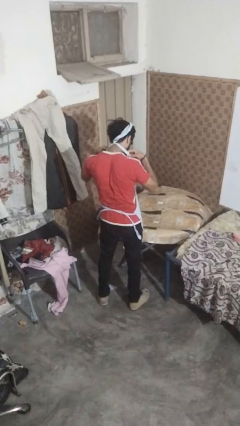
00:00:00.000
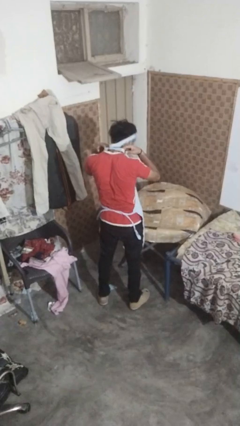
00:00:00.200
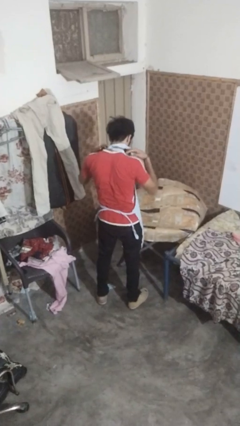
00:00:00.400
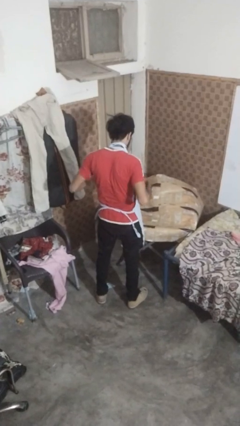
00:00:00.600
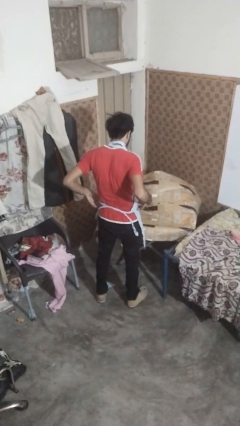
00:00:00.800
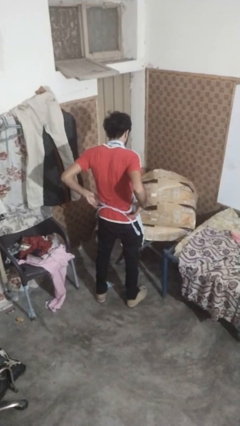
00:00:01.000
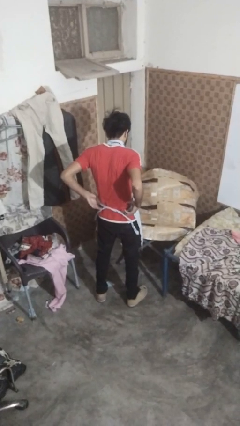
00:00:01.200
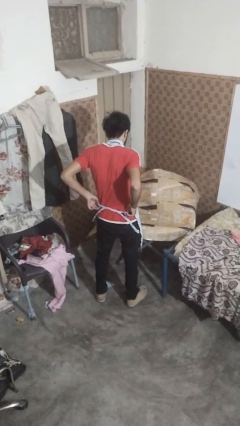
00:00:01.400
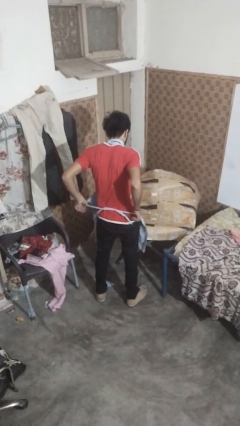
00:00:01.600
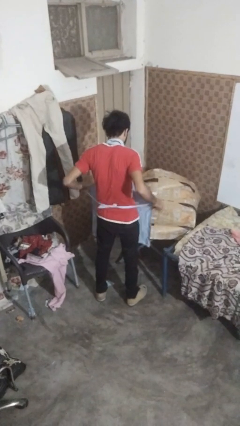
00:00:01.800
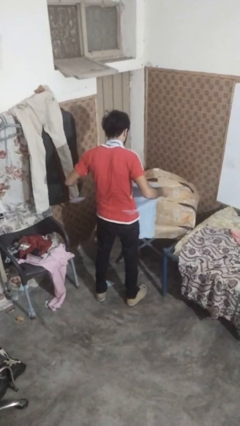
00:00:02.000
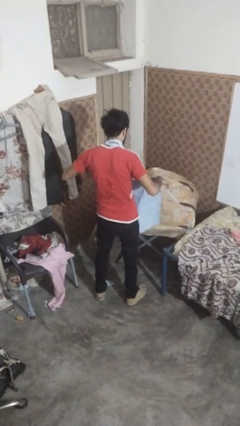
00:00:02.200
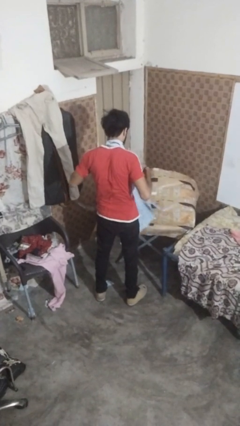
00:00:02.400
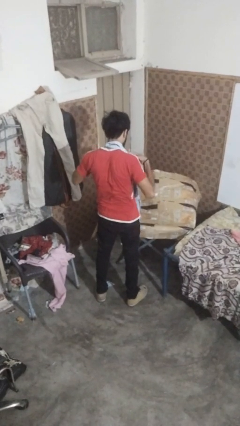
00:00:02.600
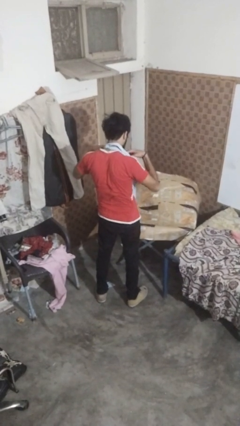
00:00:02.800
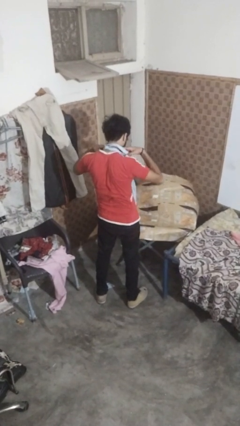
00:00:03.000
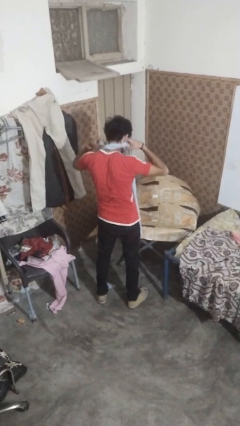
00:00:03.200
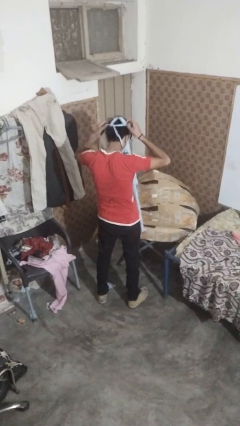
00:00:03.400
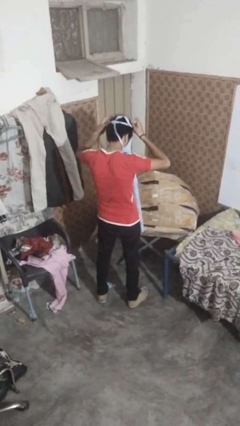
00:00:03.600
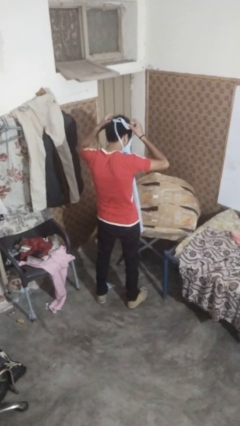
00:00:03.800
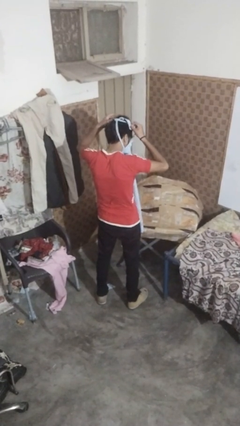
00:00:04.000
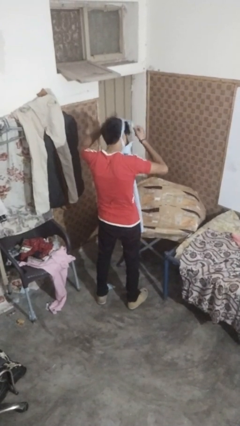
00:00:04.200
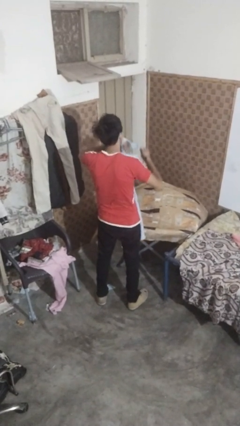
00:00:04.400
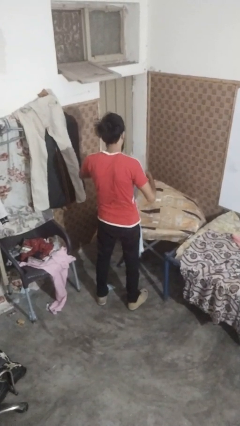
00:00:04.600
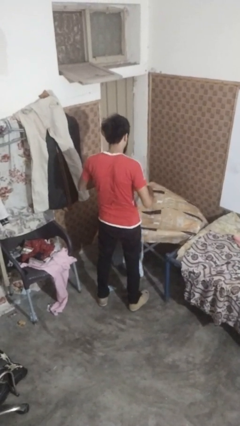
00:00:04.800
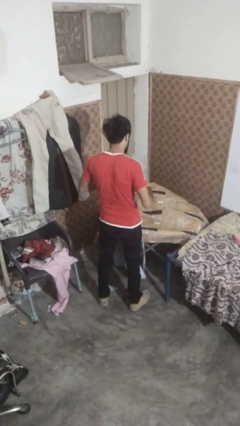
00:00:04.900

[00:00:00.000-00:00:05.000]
person takes off apron

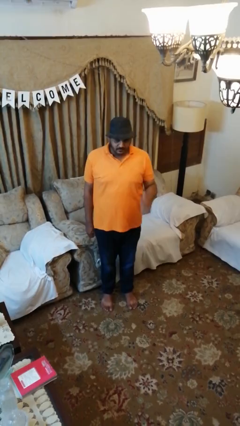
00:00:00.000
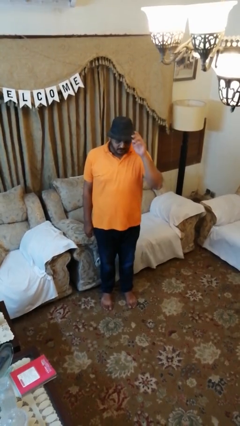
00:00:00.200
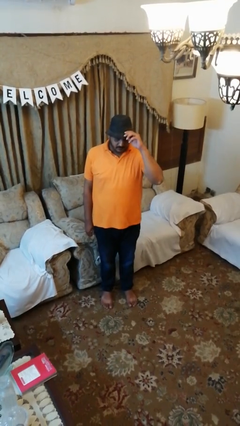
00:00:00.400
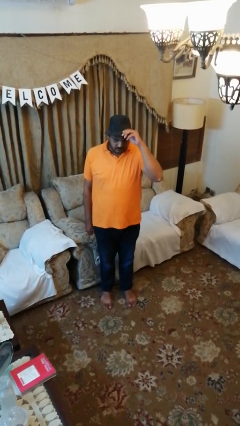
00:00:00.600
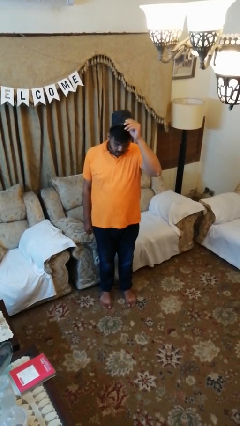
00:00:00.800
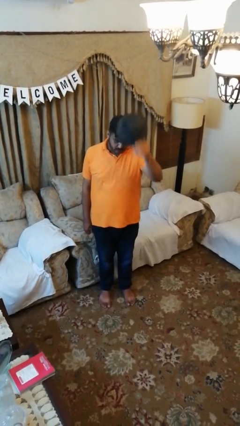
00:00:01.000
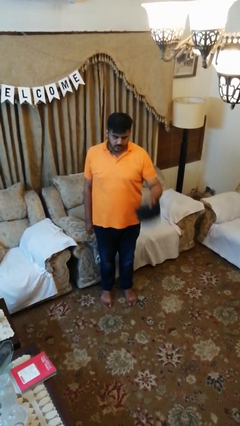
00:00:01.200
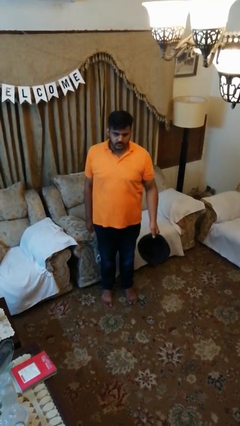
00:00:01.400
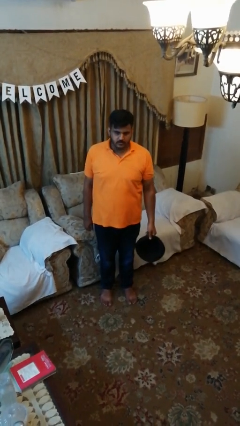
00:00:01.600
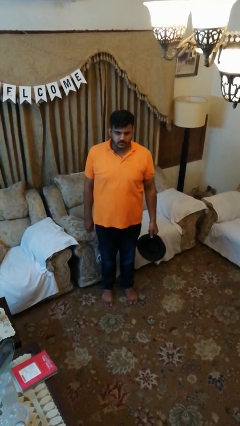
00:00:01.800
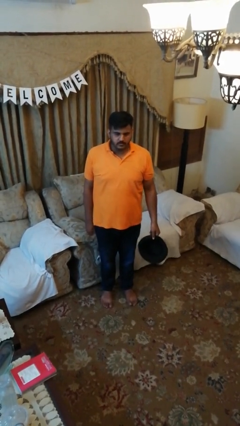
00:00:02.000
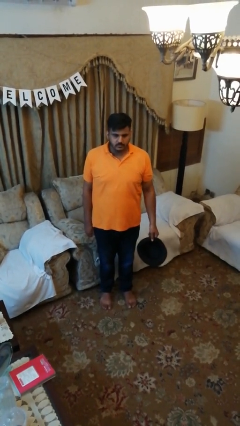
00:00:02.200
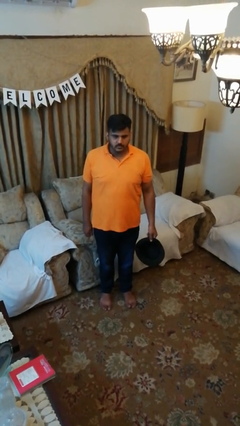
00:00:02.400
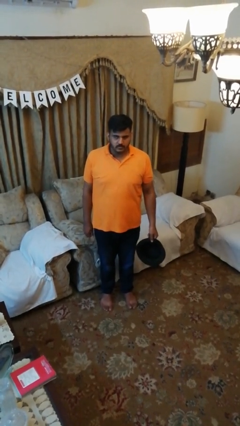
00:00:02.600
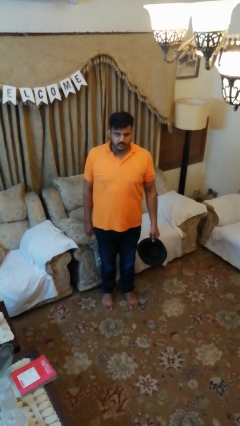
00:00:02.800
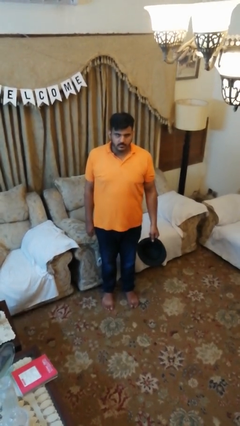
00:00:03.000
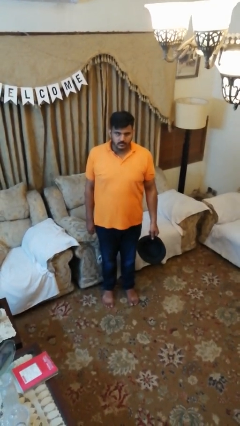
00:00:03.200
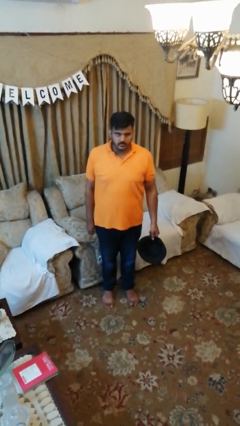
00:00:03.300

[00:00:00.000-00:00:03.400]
person takes off hat

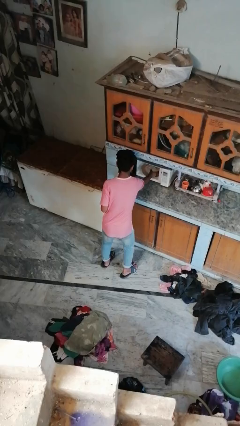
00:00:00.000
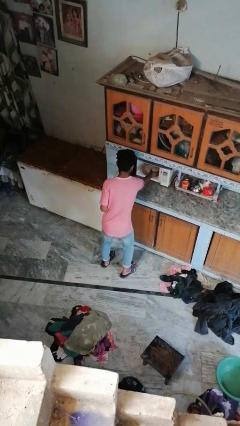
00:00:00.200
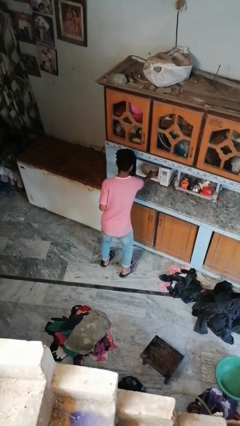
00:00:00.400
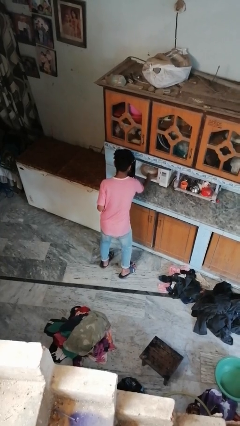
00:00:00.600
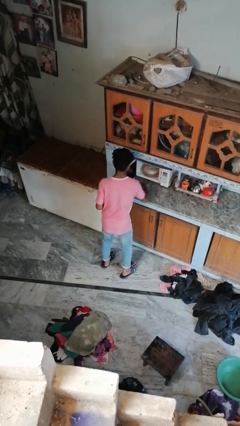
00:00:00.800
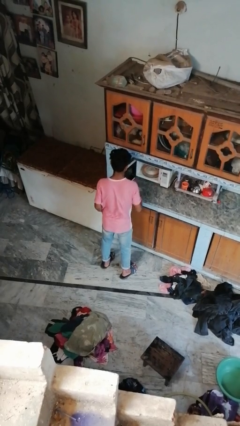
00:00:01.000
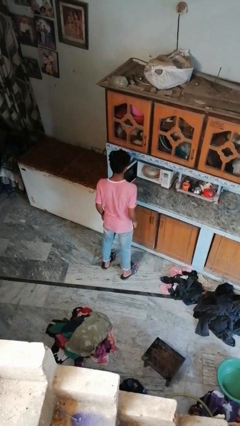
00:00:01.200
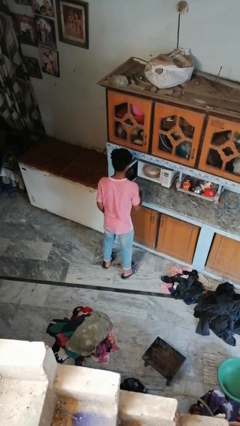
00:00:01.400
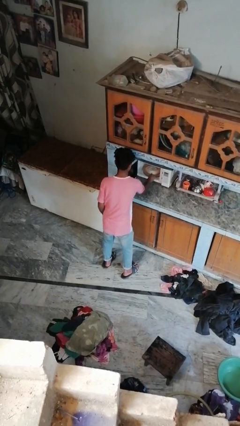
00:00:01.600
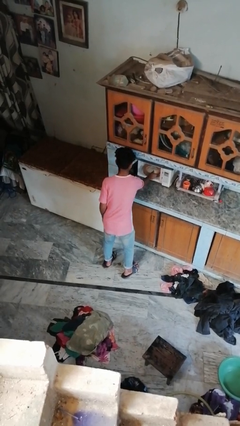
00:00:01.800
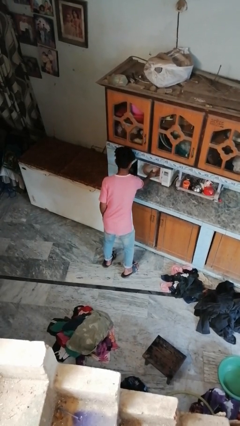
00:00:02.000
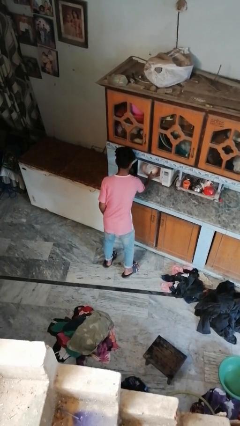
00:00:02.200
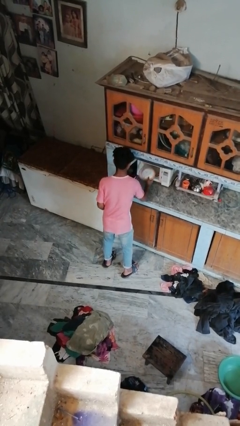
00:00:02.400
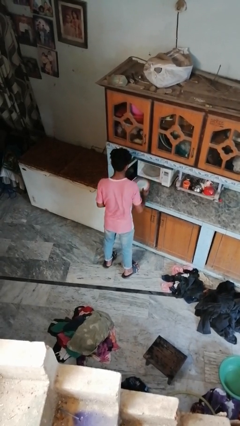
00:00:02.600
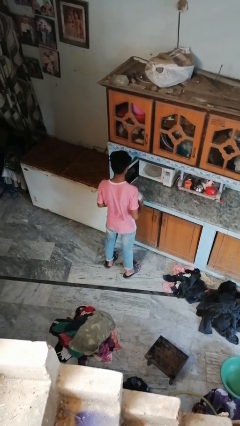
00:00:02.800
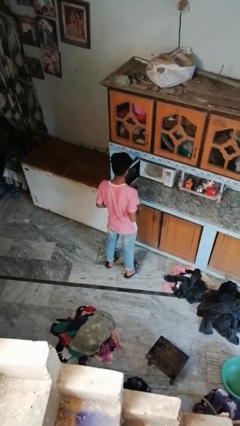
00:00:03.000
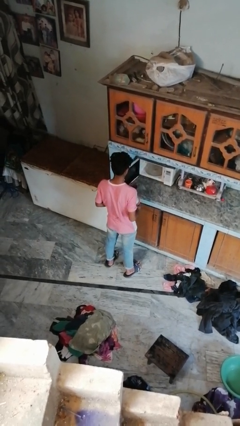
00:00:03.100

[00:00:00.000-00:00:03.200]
person takes object from oven

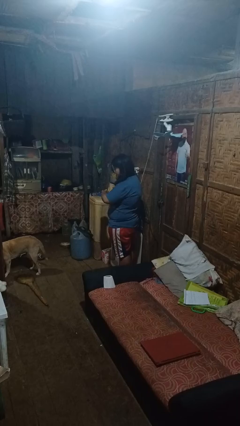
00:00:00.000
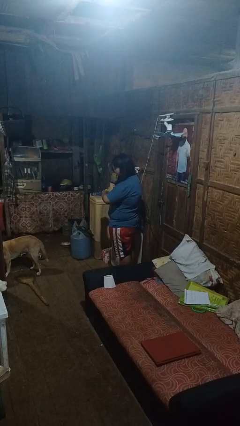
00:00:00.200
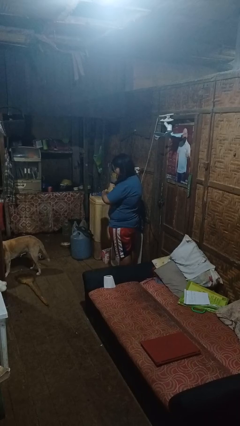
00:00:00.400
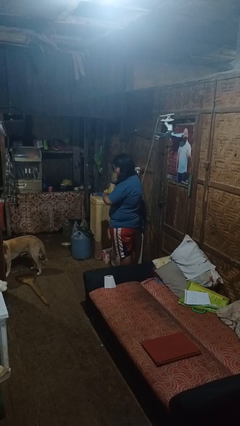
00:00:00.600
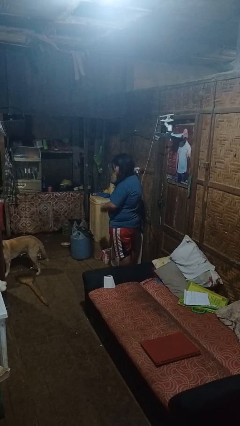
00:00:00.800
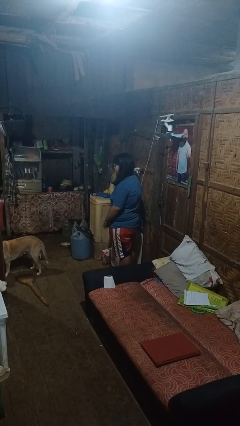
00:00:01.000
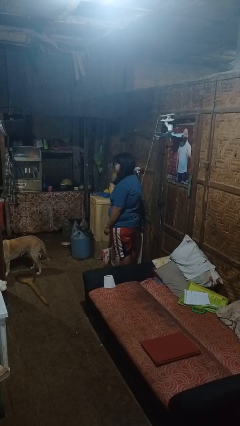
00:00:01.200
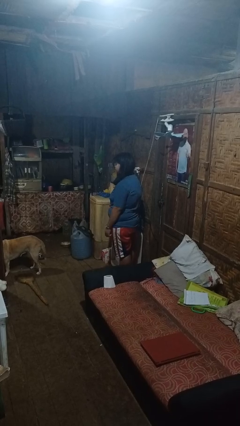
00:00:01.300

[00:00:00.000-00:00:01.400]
person looks at wristwatch

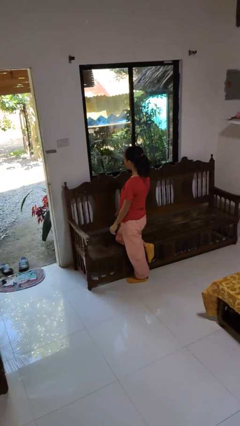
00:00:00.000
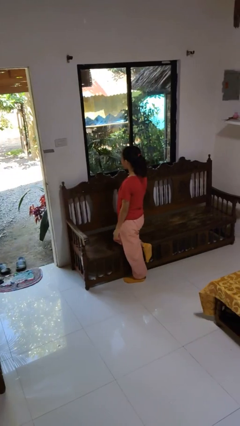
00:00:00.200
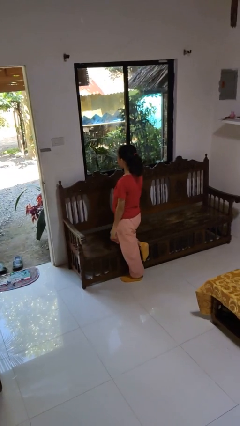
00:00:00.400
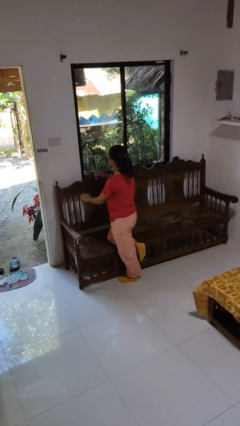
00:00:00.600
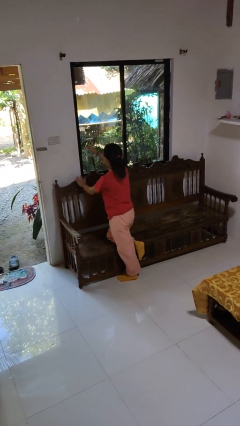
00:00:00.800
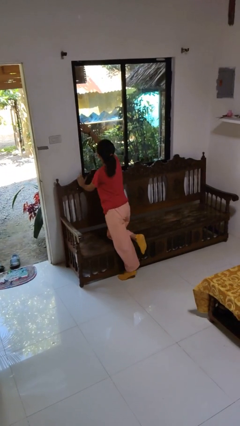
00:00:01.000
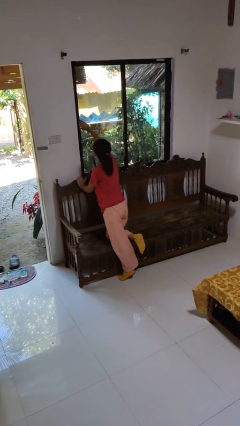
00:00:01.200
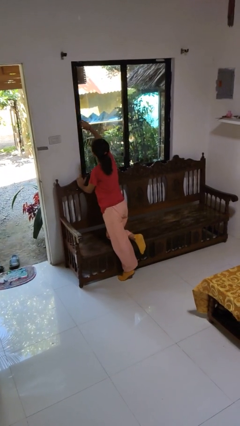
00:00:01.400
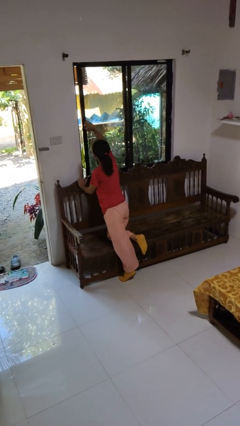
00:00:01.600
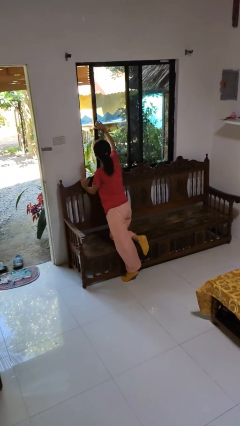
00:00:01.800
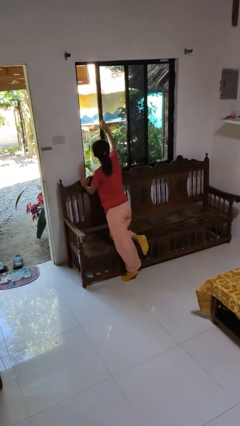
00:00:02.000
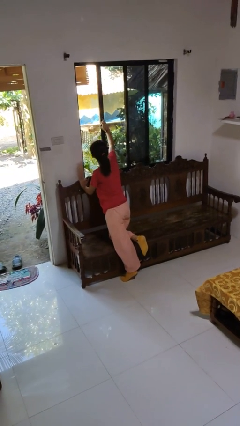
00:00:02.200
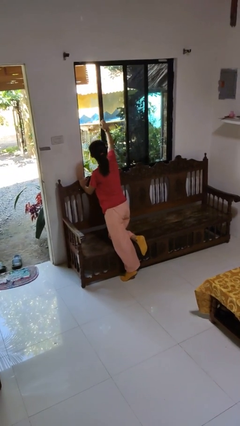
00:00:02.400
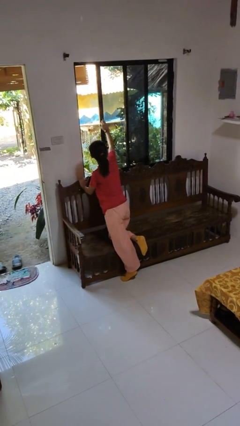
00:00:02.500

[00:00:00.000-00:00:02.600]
person opens home window

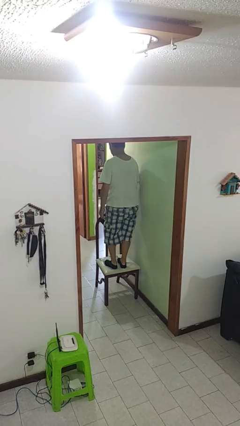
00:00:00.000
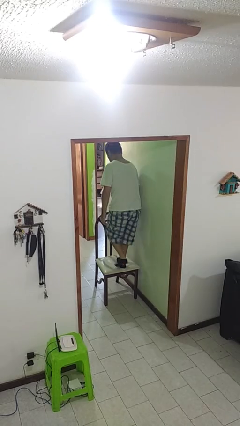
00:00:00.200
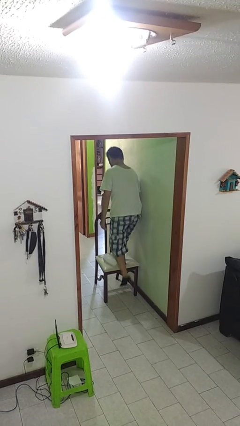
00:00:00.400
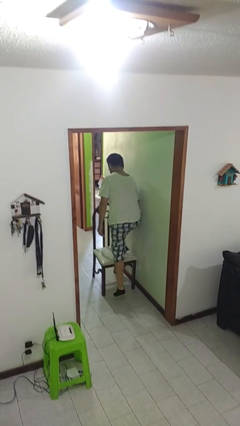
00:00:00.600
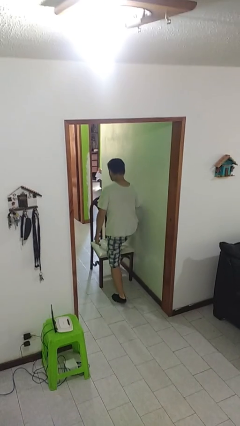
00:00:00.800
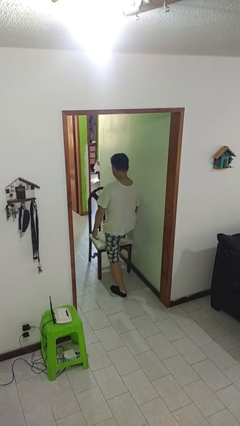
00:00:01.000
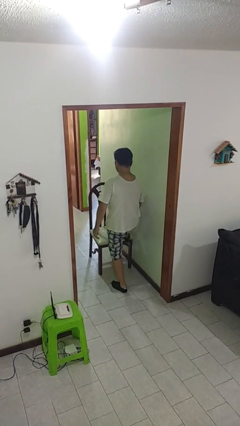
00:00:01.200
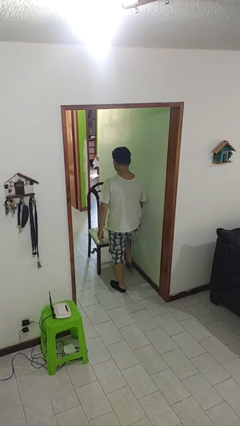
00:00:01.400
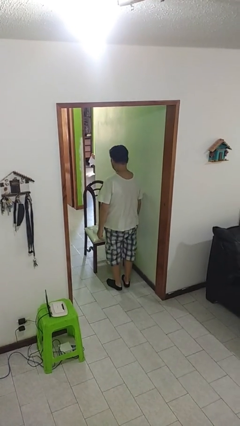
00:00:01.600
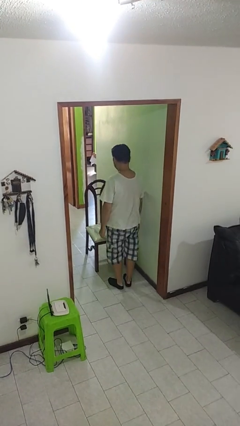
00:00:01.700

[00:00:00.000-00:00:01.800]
person climbs off chair
